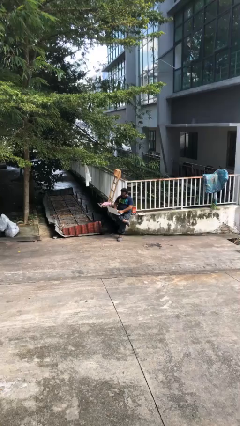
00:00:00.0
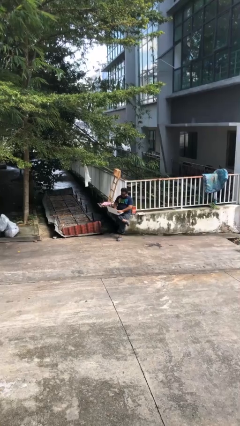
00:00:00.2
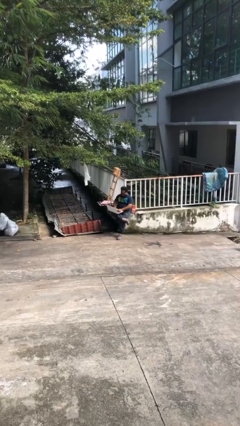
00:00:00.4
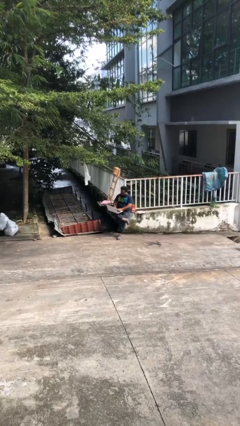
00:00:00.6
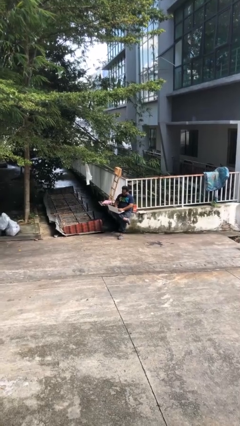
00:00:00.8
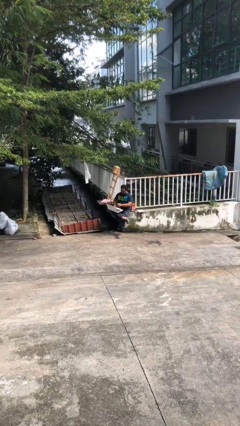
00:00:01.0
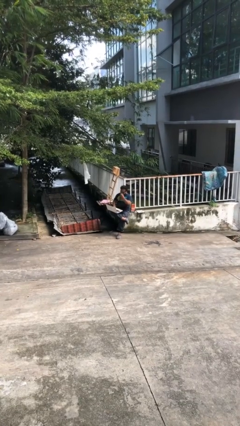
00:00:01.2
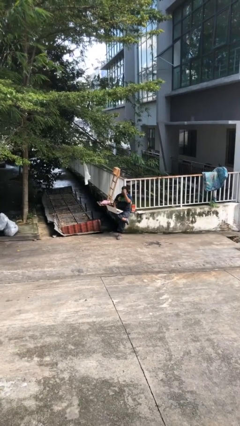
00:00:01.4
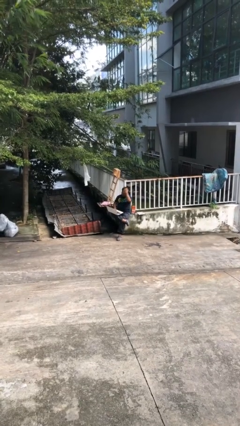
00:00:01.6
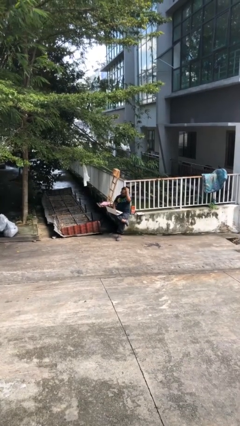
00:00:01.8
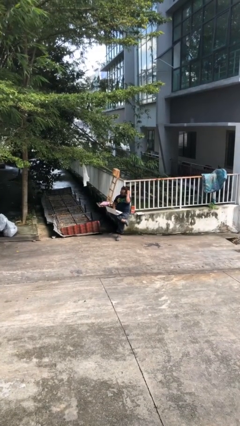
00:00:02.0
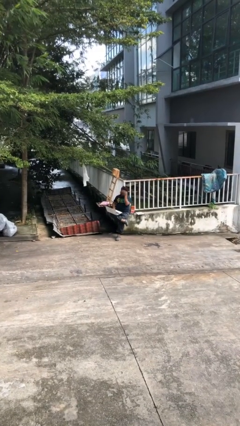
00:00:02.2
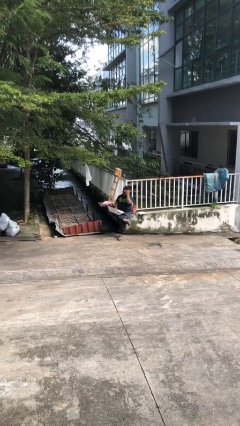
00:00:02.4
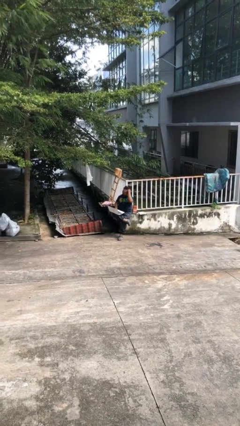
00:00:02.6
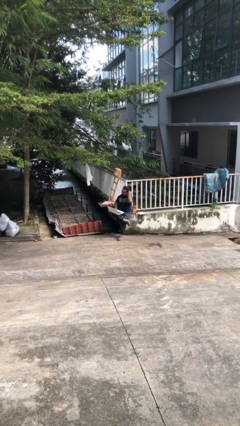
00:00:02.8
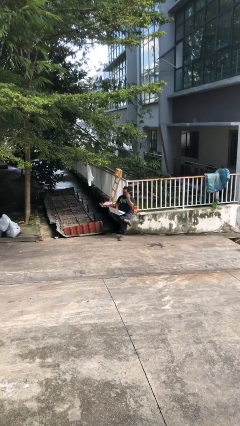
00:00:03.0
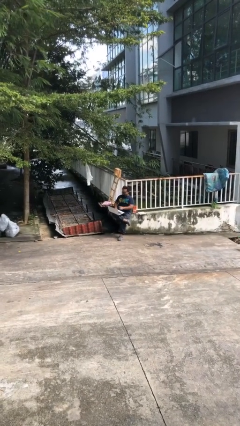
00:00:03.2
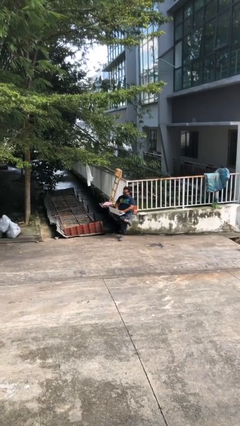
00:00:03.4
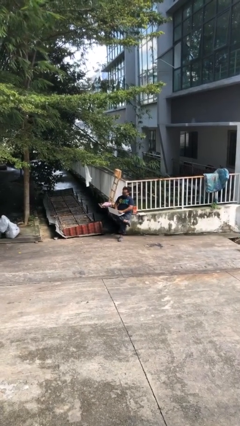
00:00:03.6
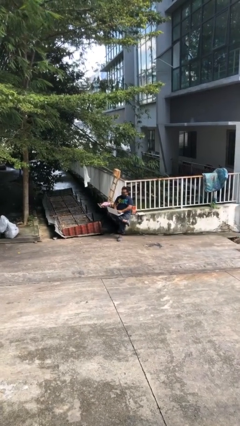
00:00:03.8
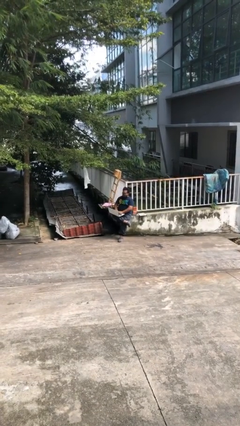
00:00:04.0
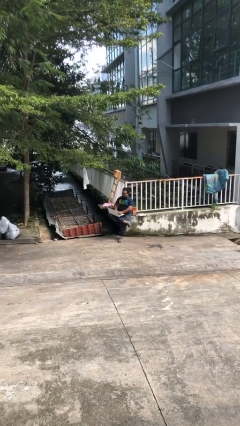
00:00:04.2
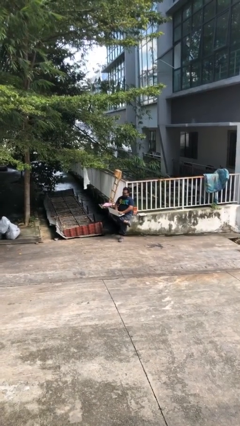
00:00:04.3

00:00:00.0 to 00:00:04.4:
person interacts with laptop

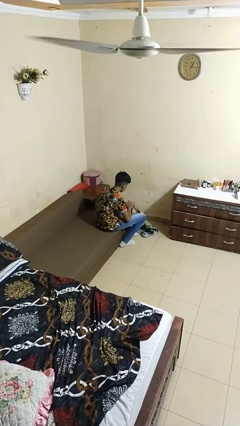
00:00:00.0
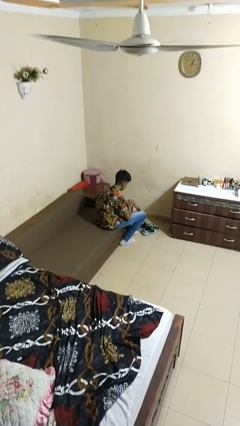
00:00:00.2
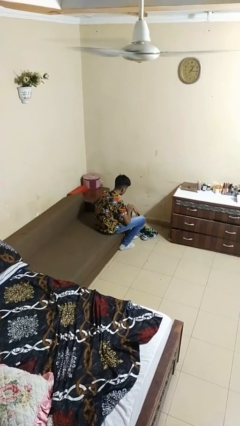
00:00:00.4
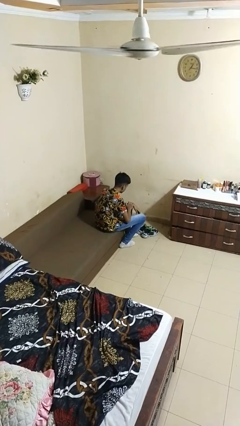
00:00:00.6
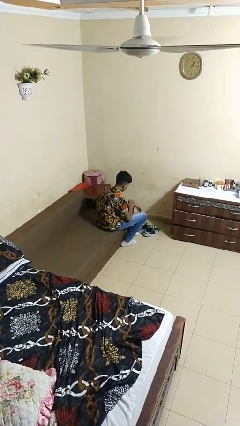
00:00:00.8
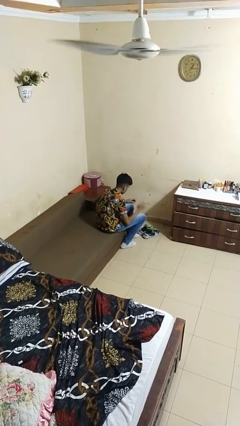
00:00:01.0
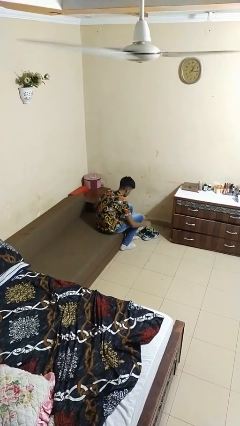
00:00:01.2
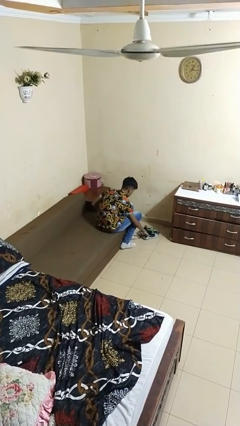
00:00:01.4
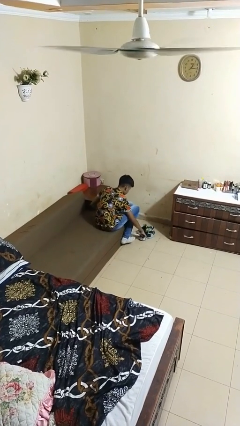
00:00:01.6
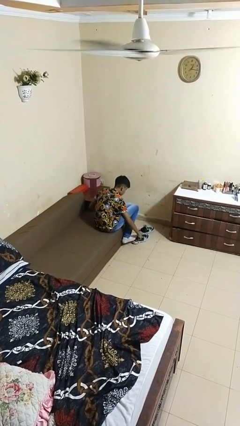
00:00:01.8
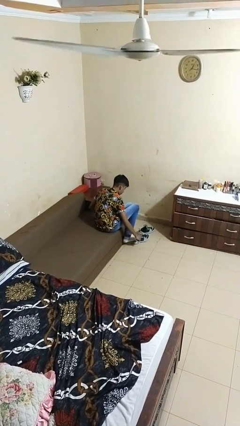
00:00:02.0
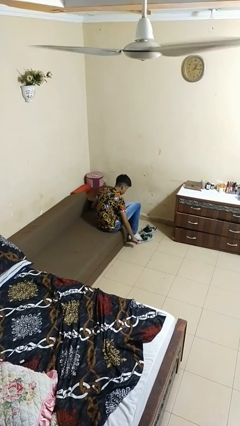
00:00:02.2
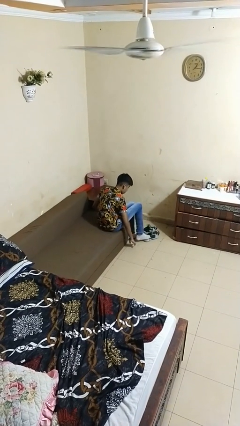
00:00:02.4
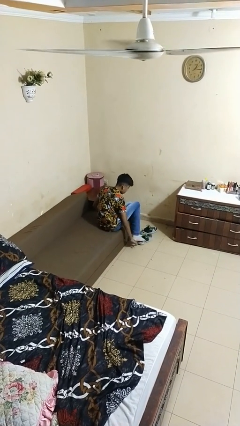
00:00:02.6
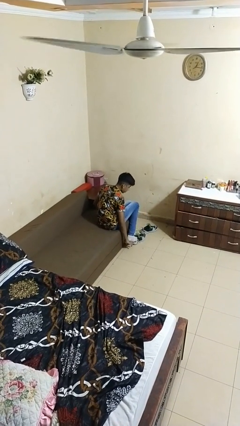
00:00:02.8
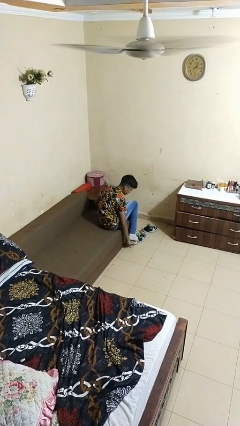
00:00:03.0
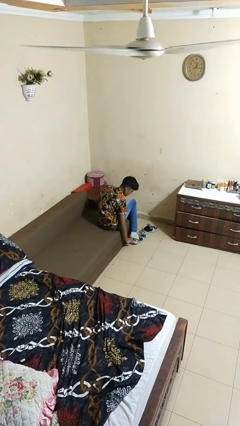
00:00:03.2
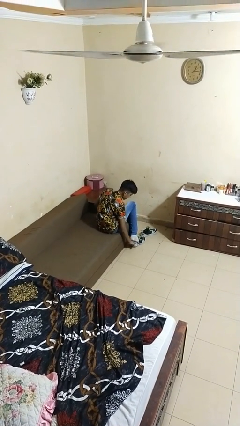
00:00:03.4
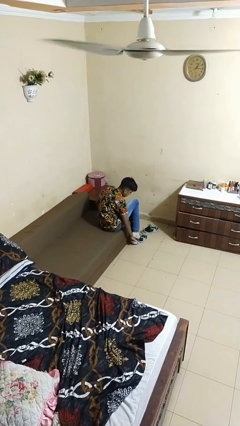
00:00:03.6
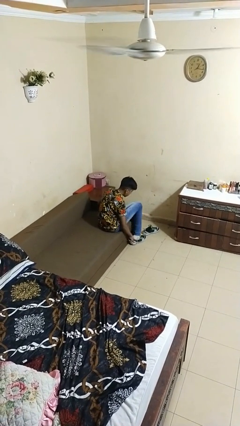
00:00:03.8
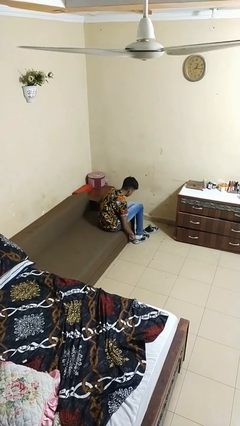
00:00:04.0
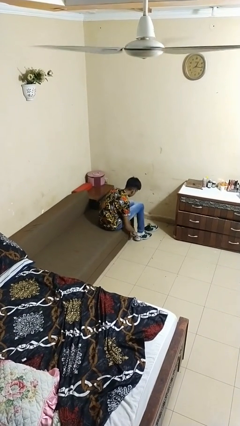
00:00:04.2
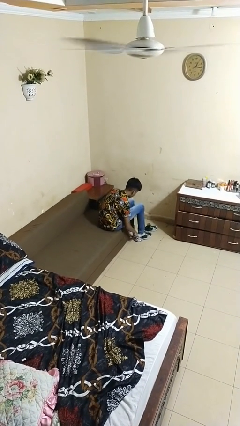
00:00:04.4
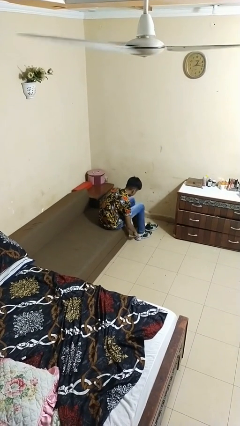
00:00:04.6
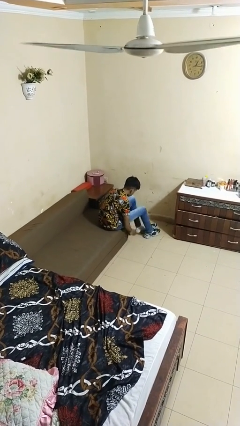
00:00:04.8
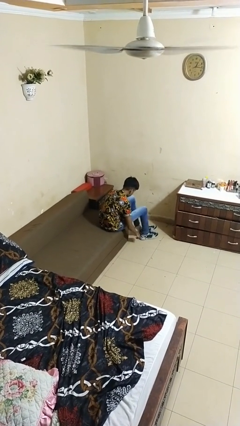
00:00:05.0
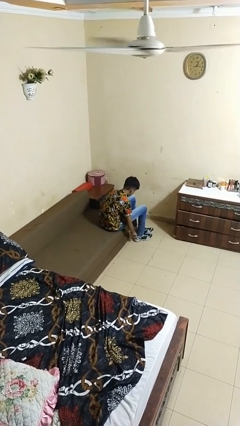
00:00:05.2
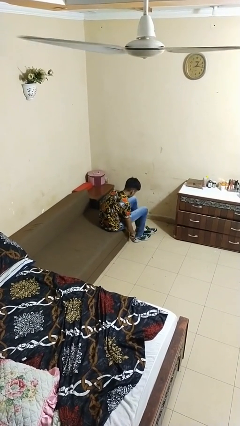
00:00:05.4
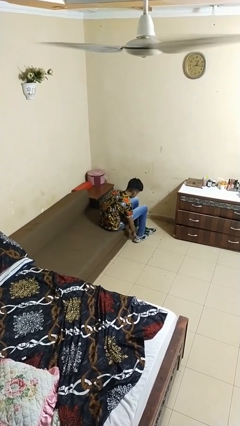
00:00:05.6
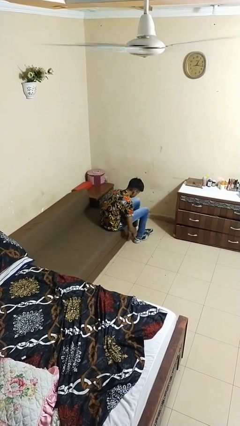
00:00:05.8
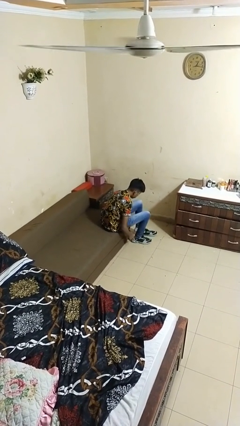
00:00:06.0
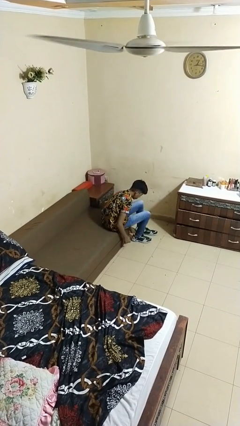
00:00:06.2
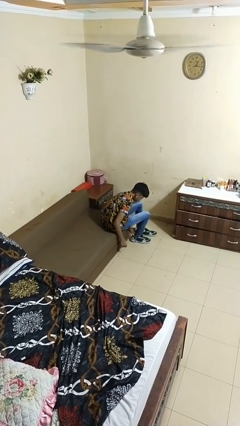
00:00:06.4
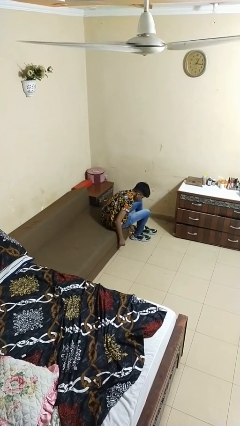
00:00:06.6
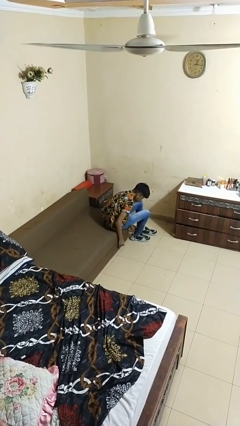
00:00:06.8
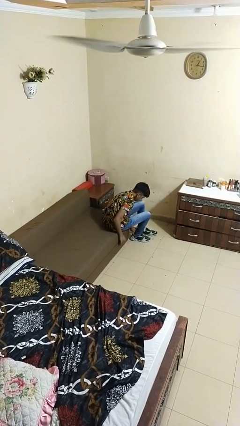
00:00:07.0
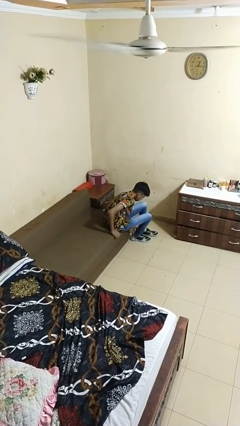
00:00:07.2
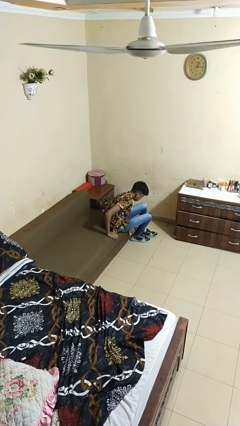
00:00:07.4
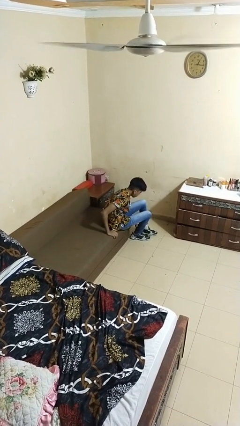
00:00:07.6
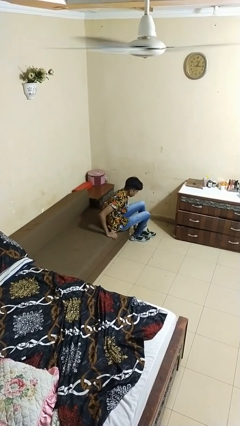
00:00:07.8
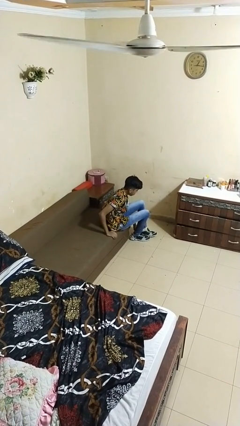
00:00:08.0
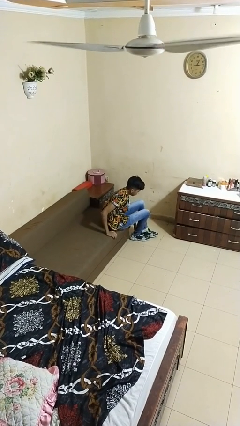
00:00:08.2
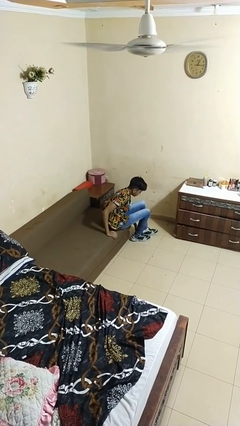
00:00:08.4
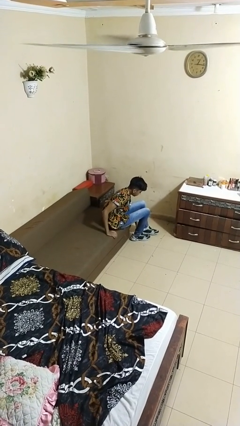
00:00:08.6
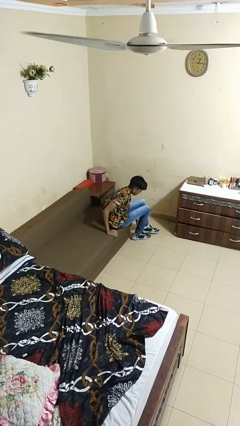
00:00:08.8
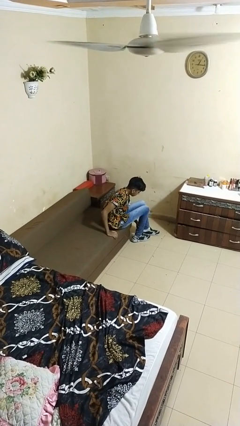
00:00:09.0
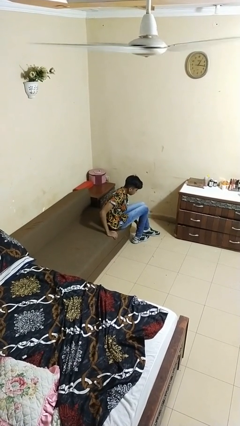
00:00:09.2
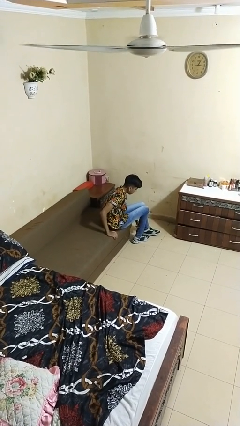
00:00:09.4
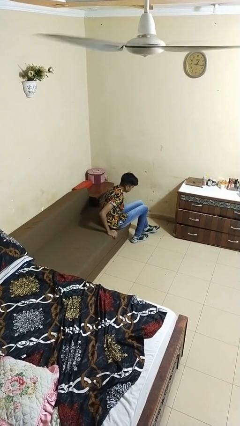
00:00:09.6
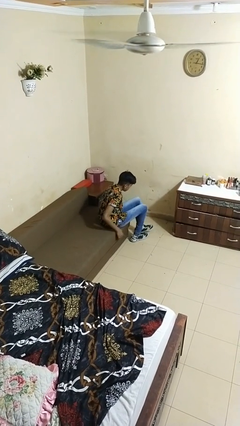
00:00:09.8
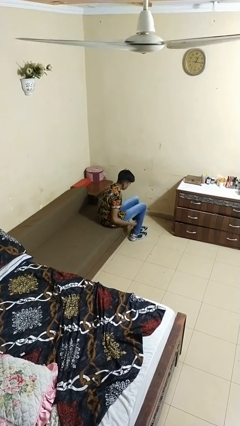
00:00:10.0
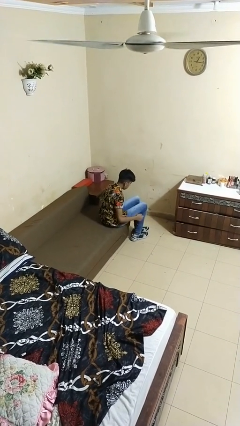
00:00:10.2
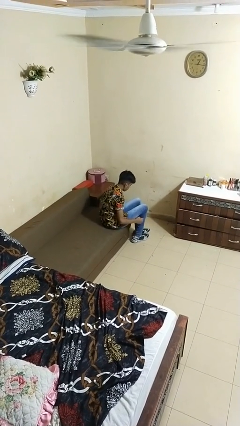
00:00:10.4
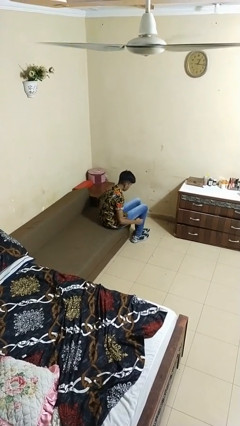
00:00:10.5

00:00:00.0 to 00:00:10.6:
person puts on shoes

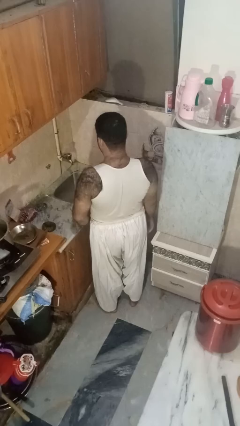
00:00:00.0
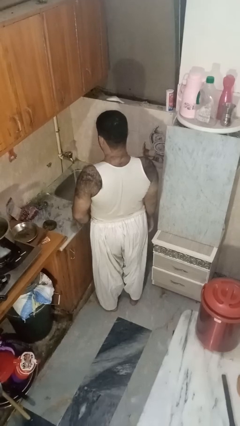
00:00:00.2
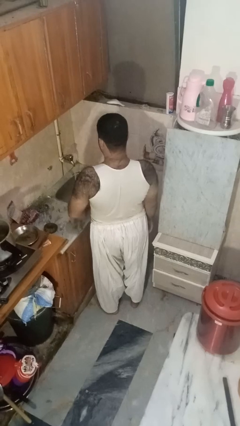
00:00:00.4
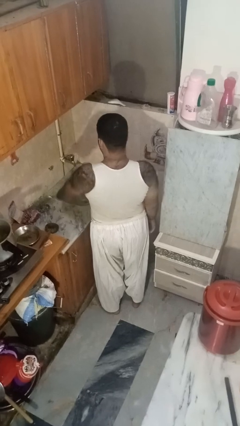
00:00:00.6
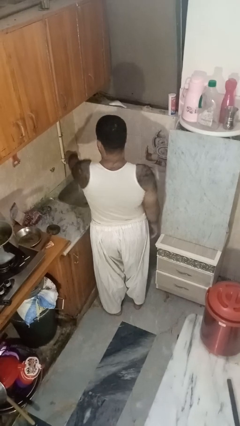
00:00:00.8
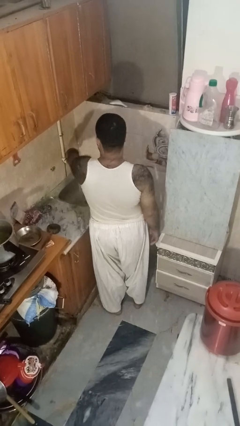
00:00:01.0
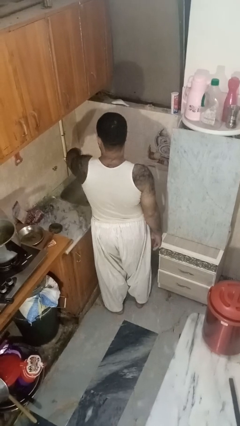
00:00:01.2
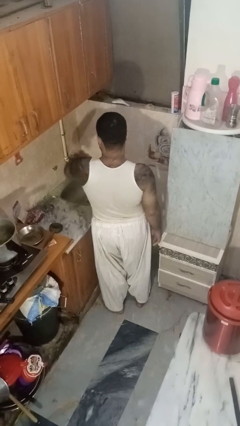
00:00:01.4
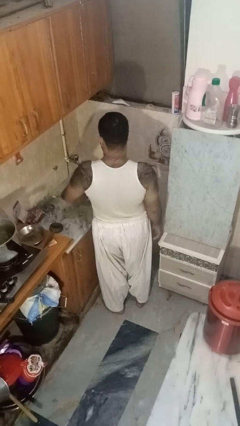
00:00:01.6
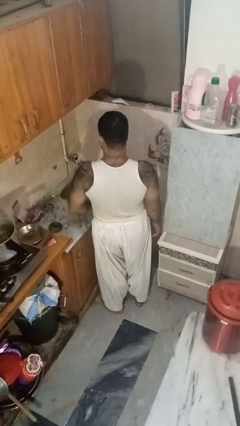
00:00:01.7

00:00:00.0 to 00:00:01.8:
person turns off faucet

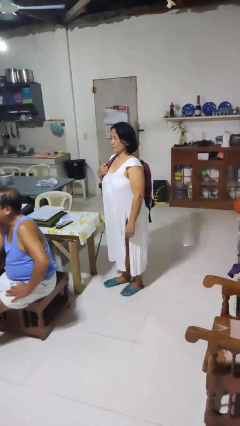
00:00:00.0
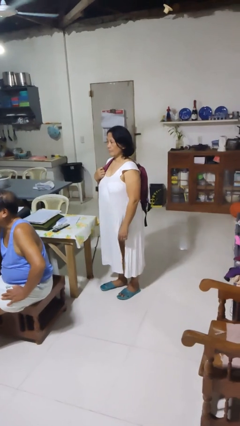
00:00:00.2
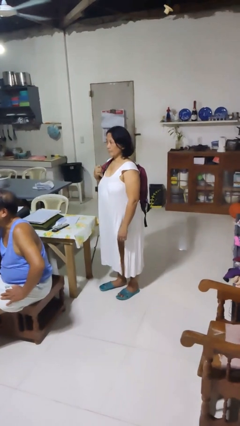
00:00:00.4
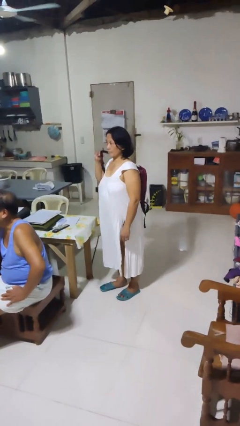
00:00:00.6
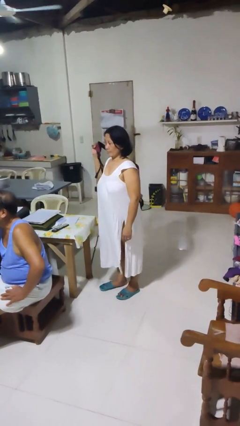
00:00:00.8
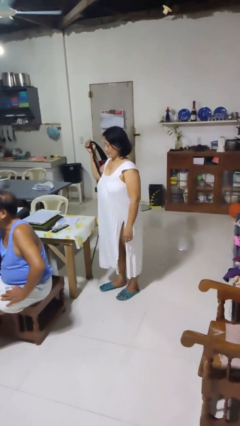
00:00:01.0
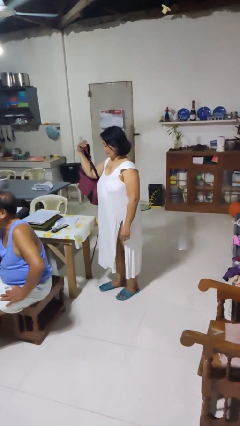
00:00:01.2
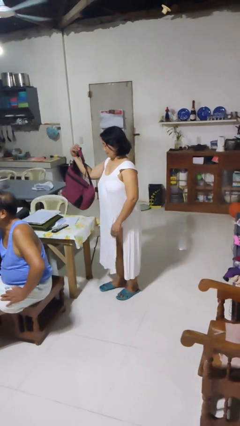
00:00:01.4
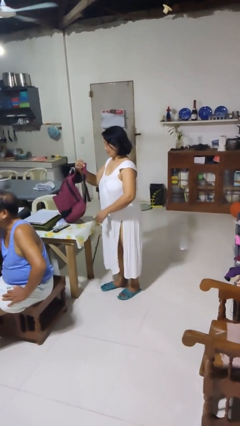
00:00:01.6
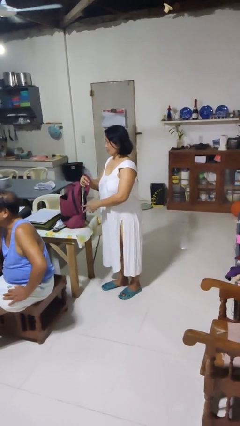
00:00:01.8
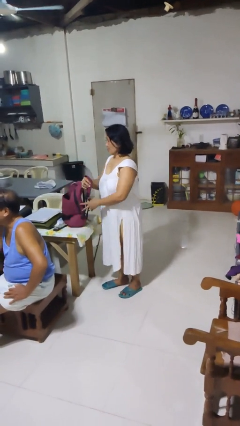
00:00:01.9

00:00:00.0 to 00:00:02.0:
person takes off backpack
